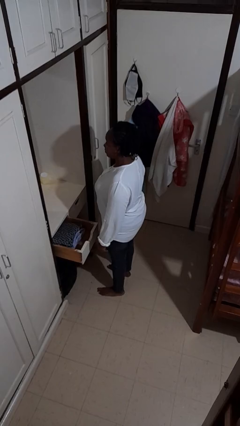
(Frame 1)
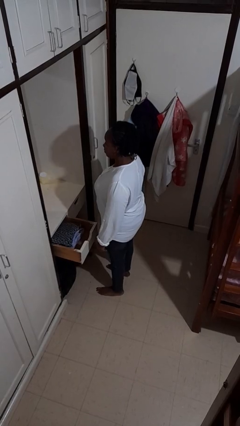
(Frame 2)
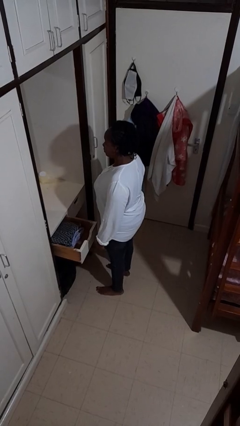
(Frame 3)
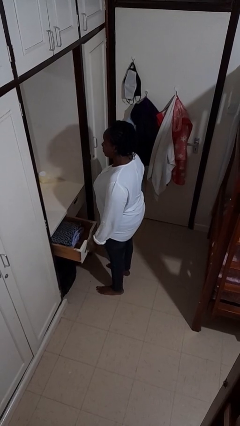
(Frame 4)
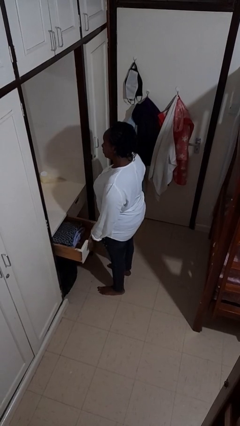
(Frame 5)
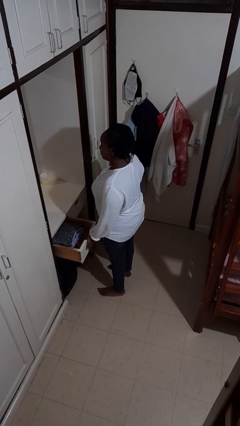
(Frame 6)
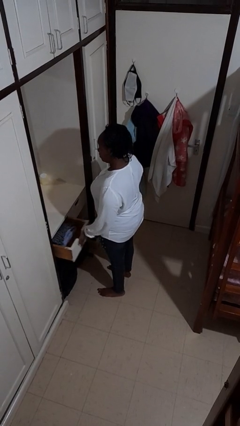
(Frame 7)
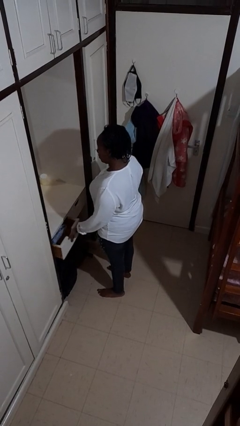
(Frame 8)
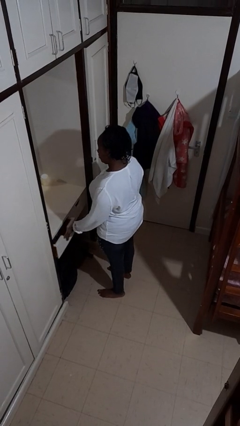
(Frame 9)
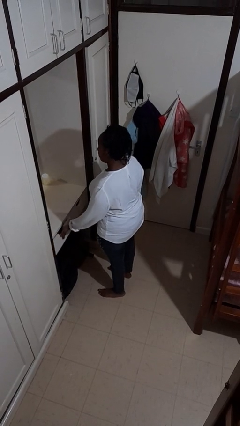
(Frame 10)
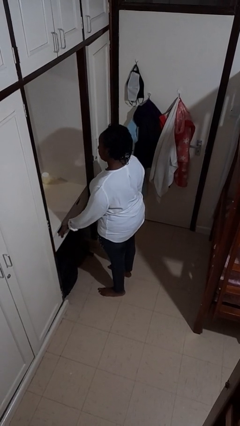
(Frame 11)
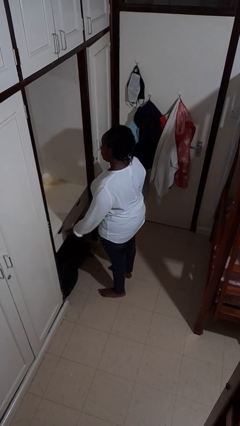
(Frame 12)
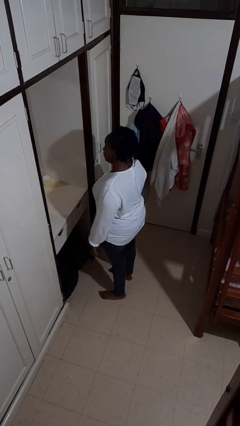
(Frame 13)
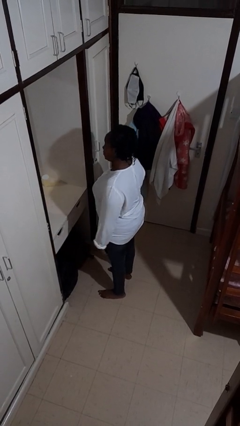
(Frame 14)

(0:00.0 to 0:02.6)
person closes dresser drawer

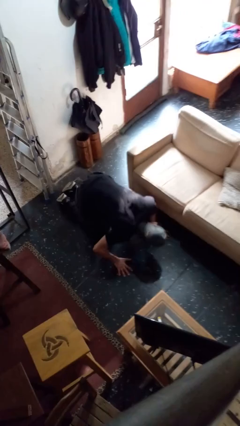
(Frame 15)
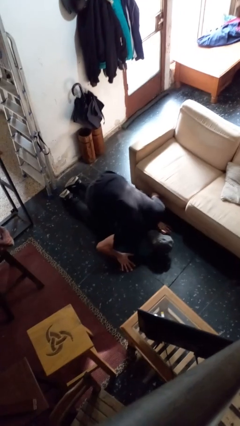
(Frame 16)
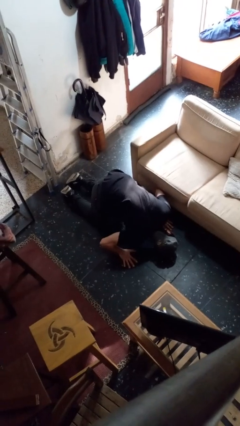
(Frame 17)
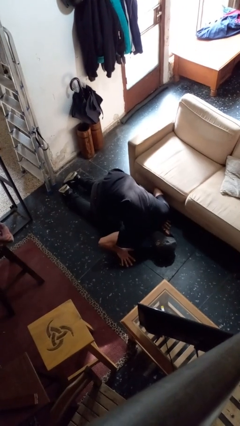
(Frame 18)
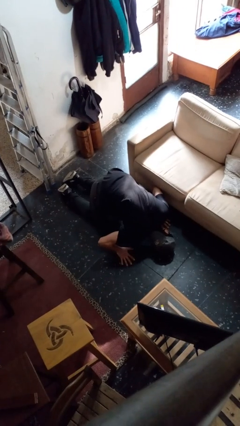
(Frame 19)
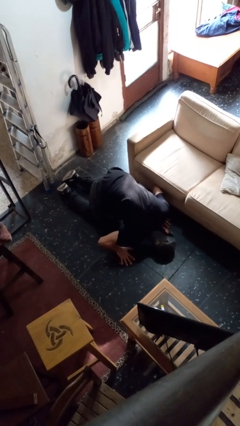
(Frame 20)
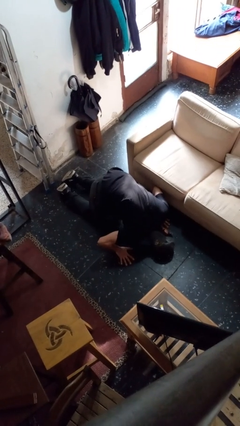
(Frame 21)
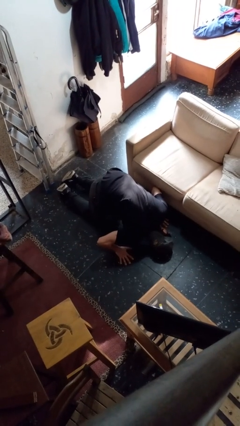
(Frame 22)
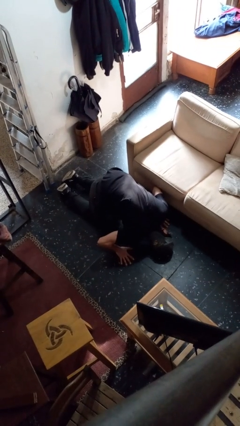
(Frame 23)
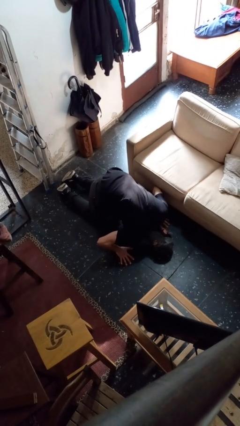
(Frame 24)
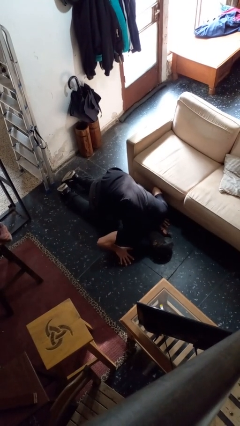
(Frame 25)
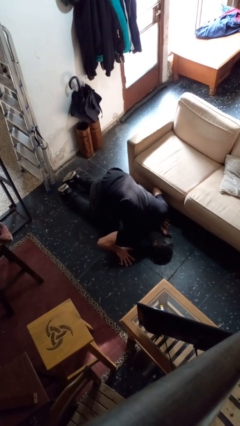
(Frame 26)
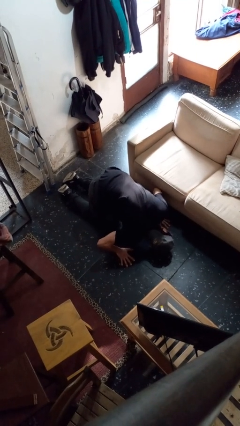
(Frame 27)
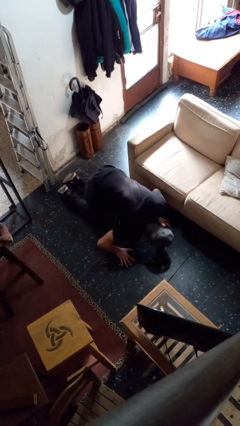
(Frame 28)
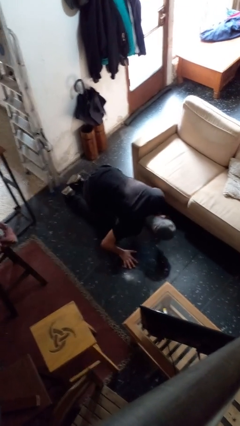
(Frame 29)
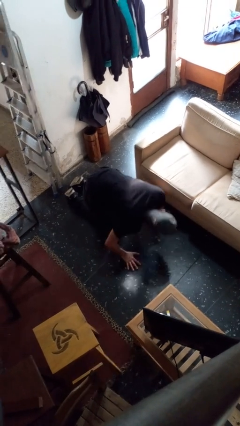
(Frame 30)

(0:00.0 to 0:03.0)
person searches under couch

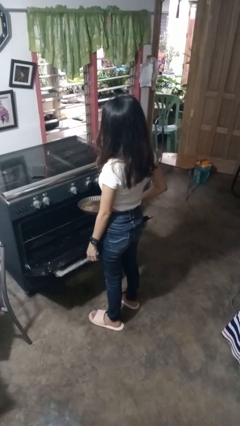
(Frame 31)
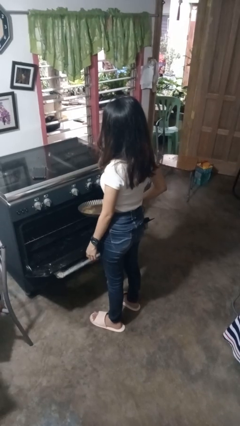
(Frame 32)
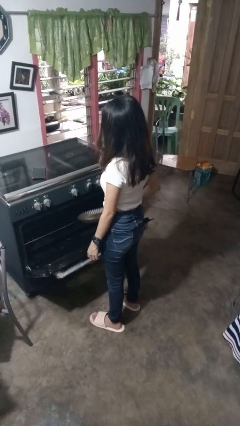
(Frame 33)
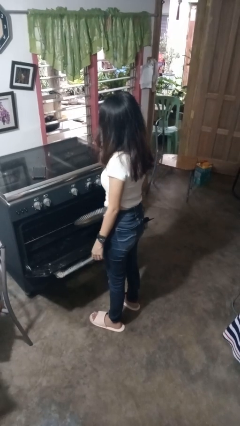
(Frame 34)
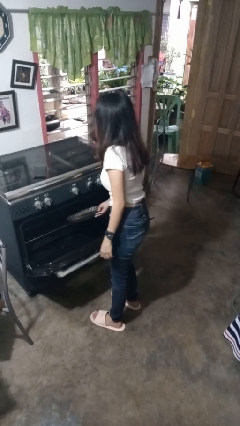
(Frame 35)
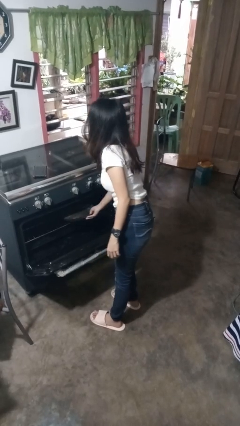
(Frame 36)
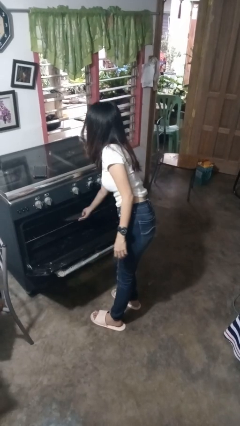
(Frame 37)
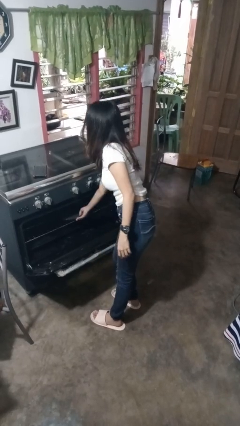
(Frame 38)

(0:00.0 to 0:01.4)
person puts object into oven

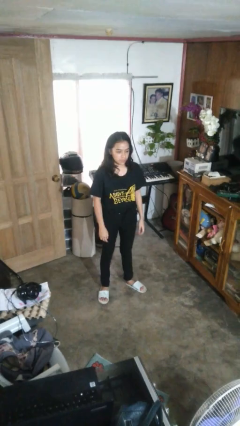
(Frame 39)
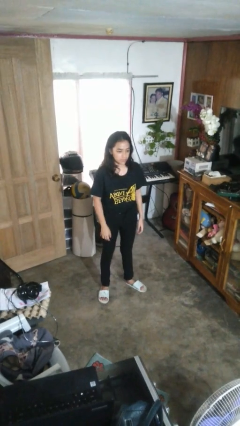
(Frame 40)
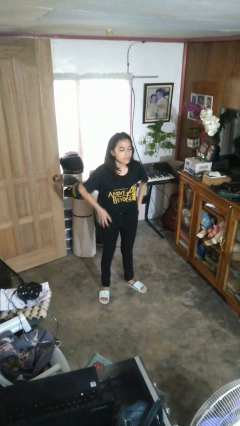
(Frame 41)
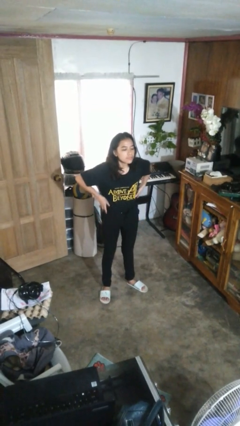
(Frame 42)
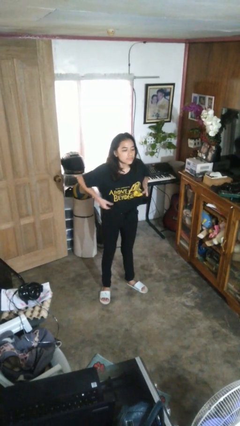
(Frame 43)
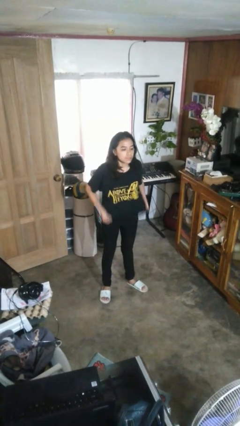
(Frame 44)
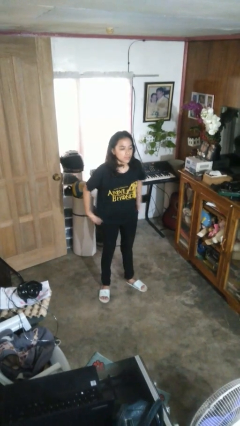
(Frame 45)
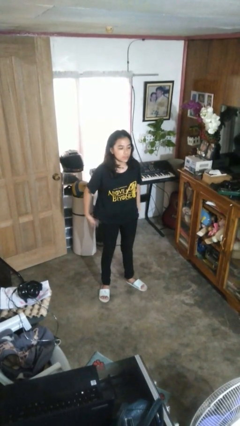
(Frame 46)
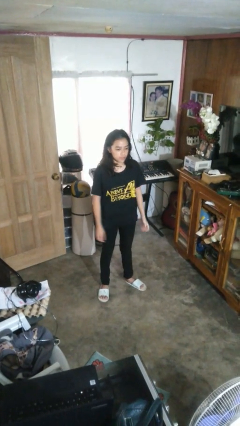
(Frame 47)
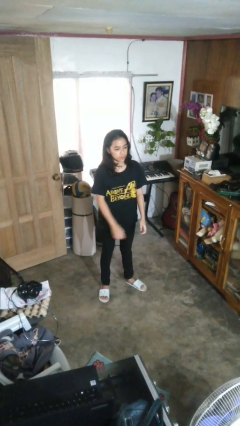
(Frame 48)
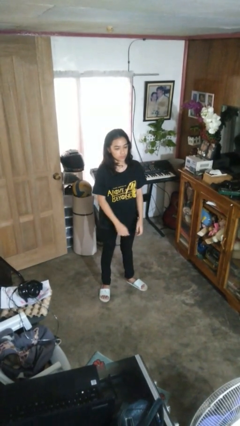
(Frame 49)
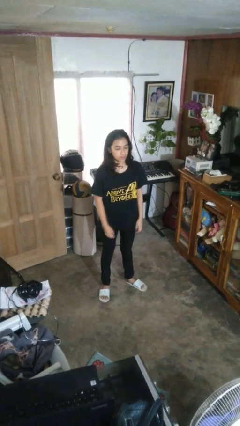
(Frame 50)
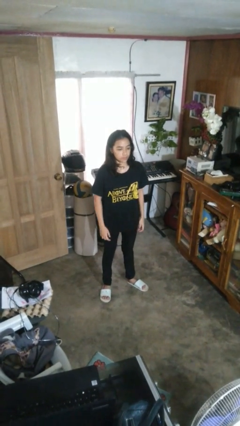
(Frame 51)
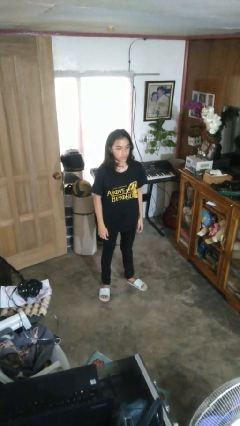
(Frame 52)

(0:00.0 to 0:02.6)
person untucks shirt

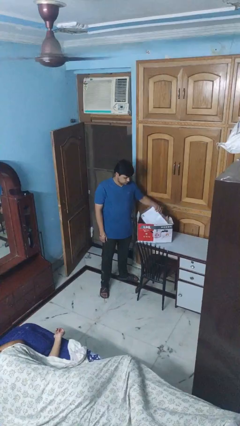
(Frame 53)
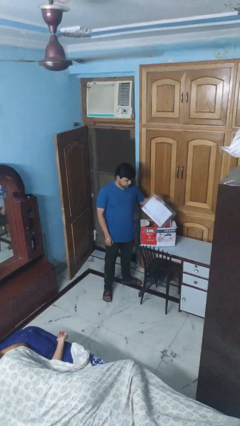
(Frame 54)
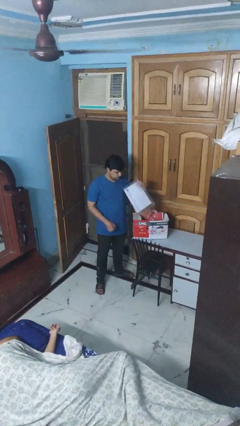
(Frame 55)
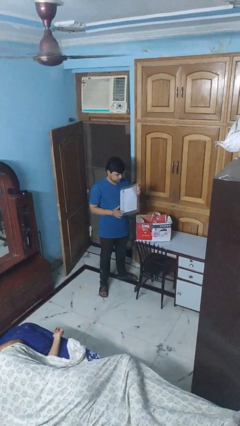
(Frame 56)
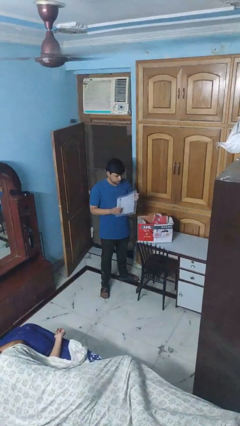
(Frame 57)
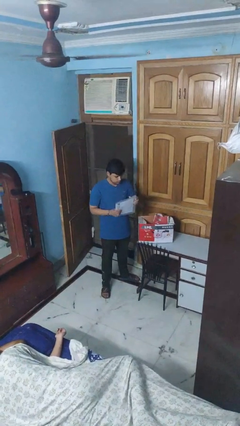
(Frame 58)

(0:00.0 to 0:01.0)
person takes object from box

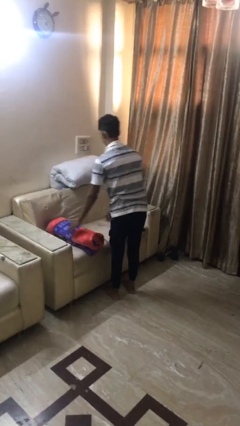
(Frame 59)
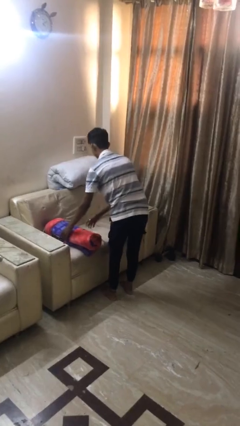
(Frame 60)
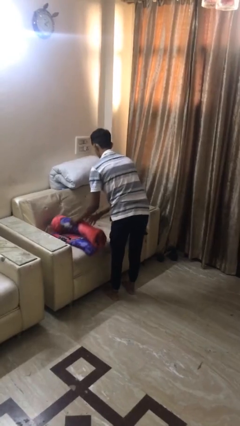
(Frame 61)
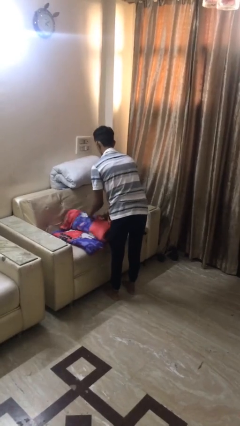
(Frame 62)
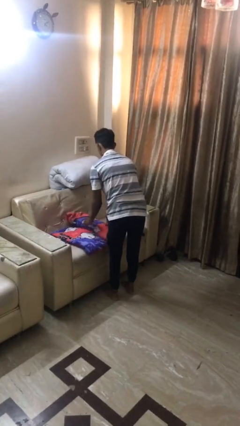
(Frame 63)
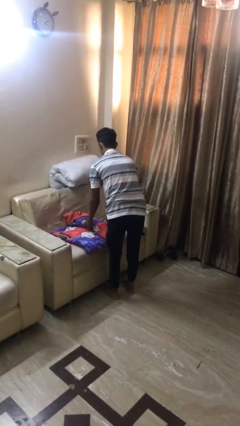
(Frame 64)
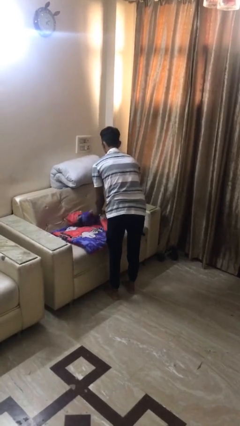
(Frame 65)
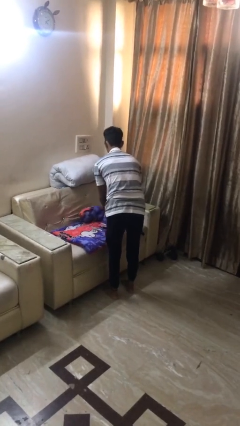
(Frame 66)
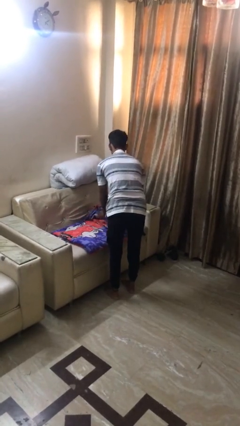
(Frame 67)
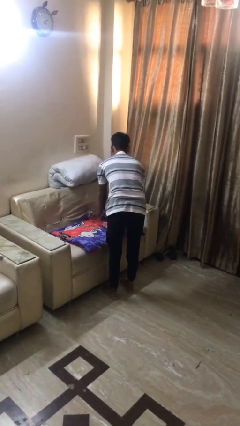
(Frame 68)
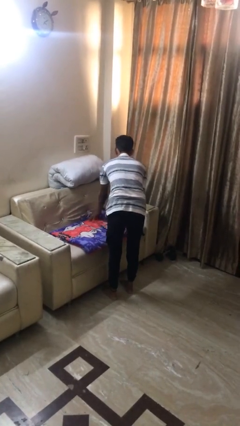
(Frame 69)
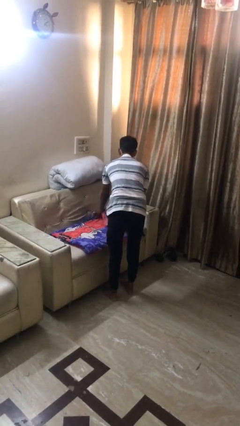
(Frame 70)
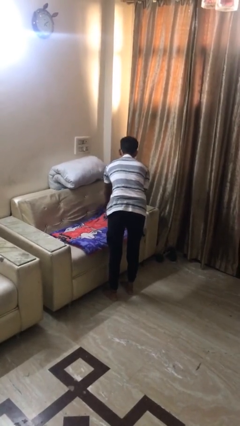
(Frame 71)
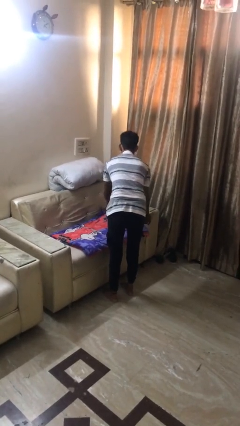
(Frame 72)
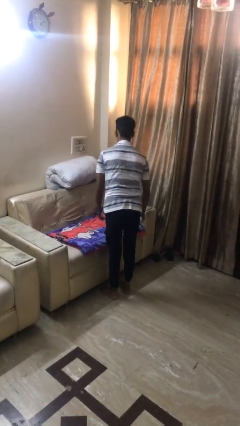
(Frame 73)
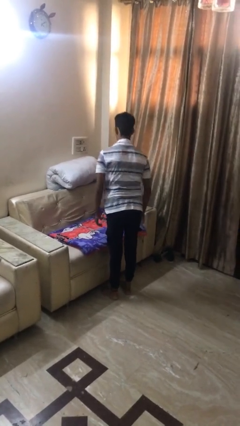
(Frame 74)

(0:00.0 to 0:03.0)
person unfolds blanket

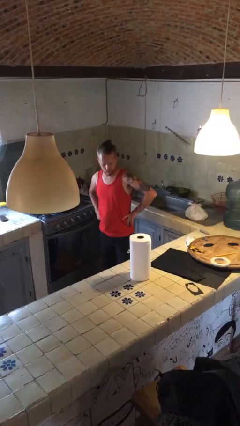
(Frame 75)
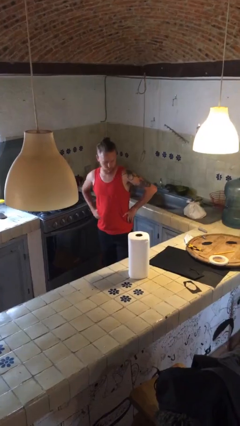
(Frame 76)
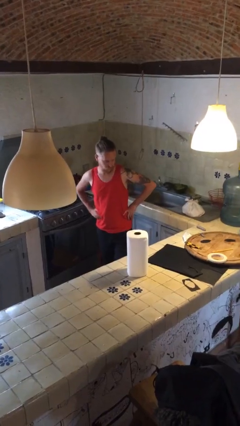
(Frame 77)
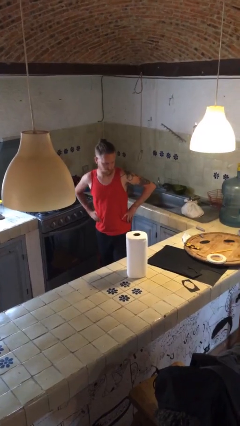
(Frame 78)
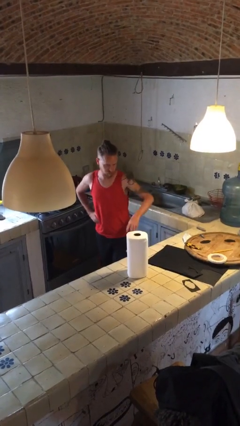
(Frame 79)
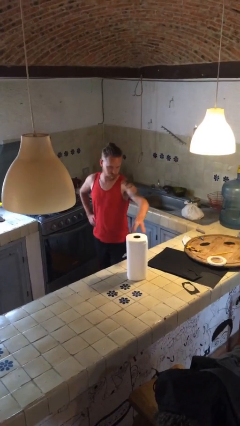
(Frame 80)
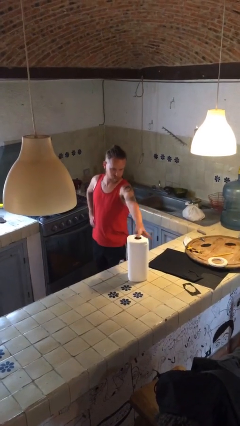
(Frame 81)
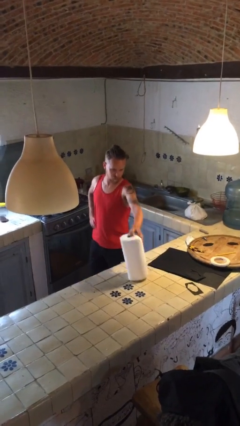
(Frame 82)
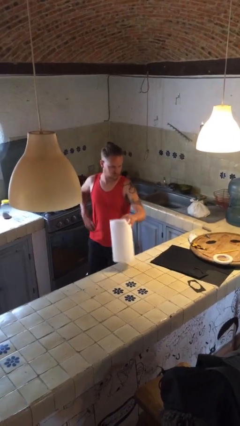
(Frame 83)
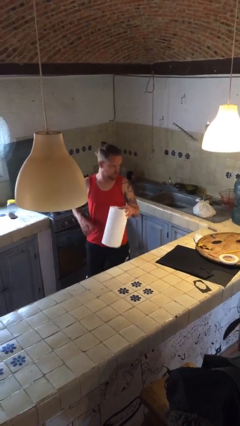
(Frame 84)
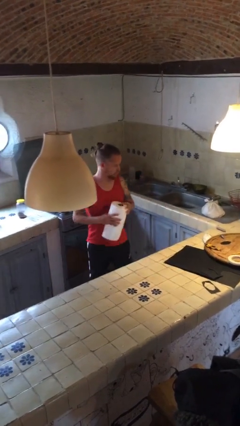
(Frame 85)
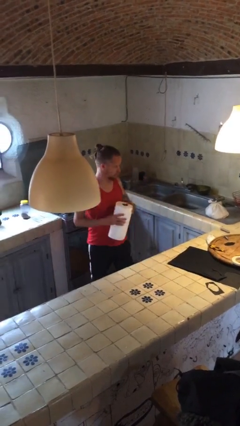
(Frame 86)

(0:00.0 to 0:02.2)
person picks up object from countertop

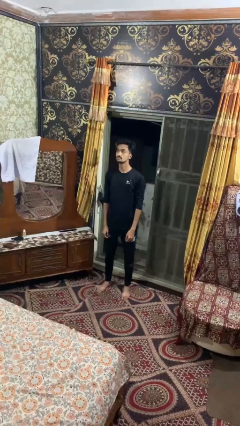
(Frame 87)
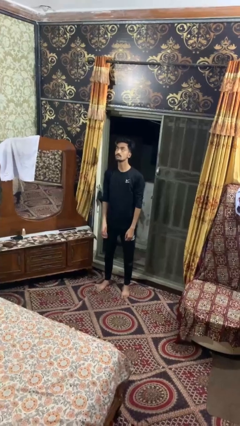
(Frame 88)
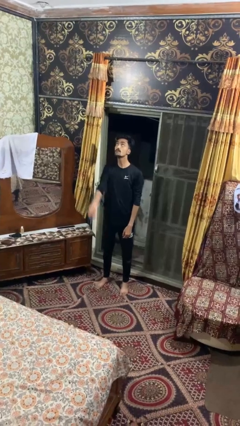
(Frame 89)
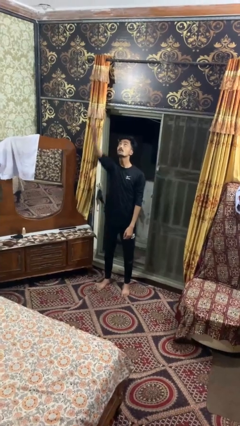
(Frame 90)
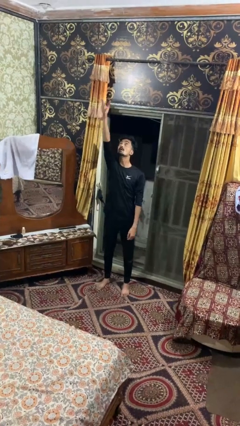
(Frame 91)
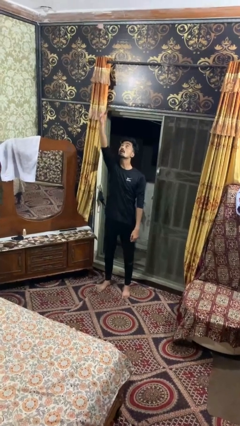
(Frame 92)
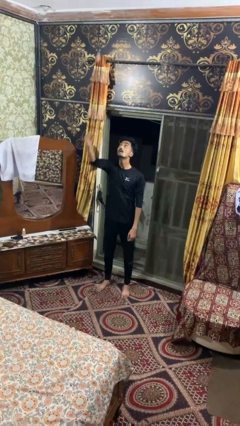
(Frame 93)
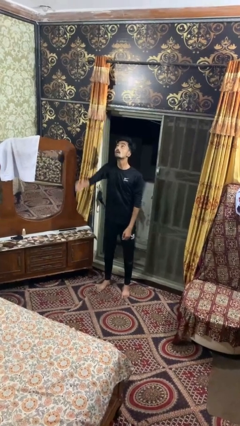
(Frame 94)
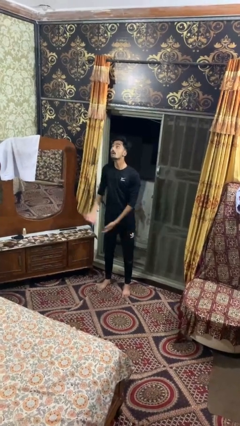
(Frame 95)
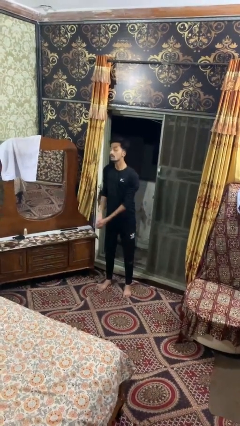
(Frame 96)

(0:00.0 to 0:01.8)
person drops object
